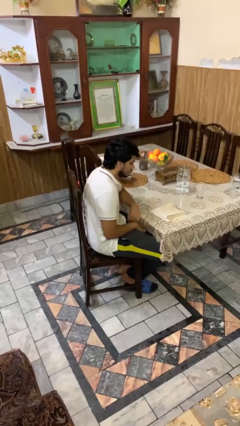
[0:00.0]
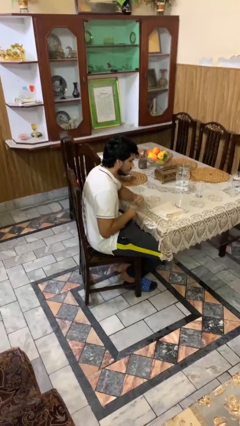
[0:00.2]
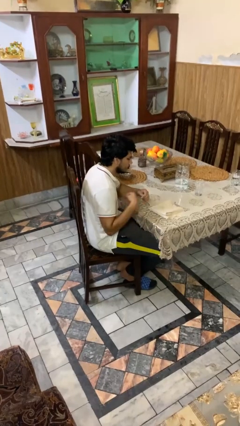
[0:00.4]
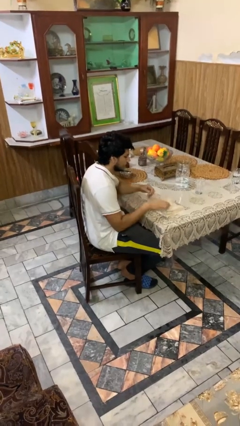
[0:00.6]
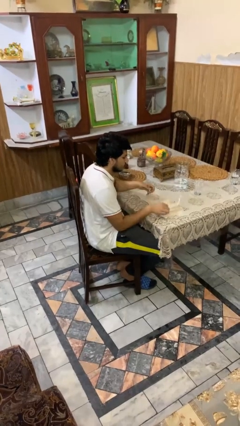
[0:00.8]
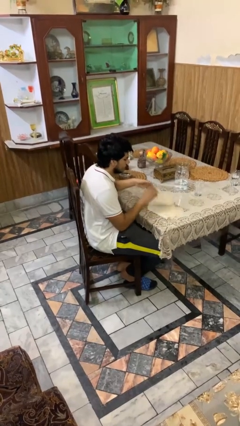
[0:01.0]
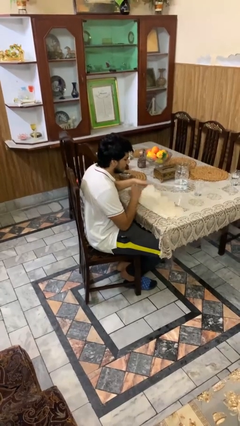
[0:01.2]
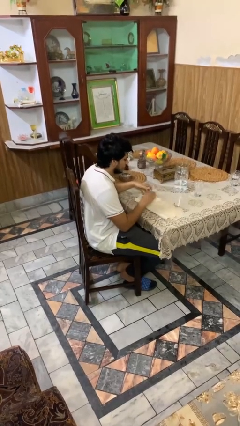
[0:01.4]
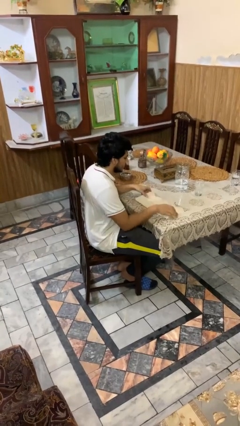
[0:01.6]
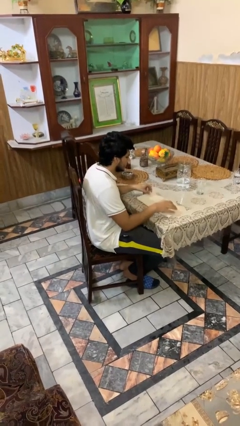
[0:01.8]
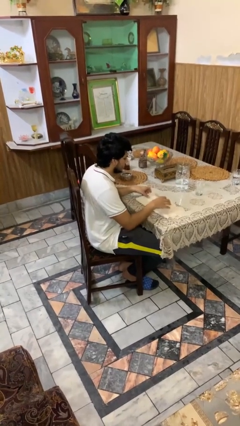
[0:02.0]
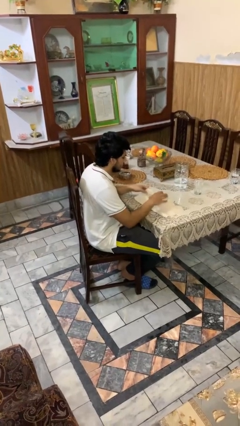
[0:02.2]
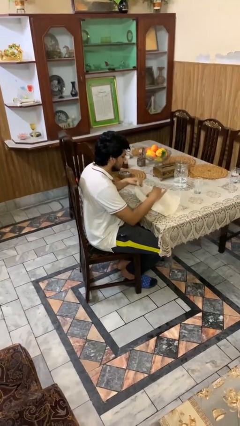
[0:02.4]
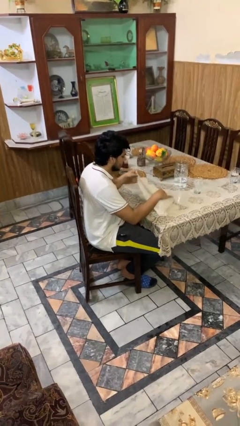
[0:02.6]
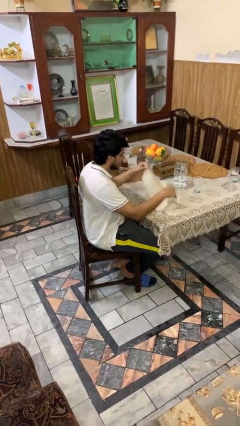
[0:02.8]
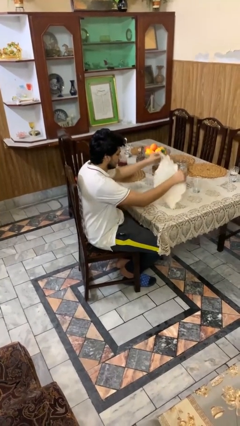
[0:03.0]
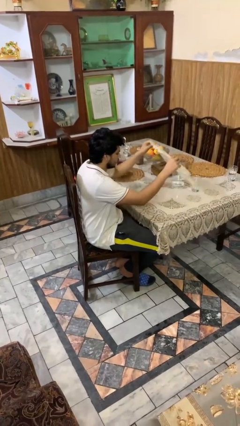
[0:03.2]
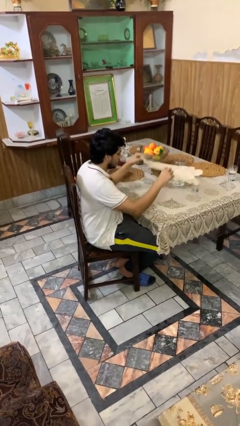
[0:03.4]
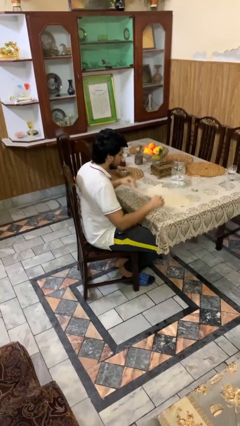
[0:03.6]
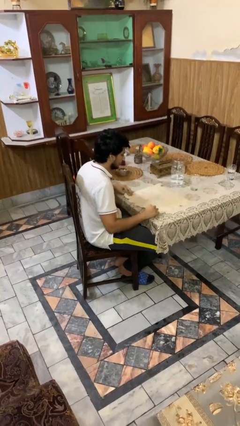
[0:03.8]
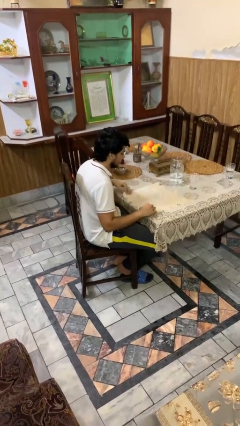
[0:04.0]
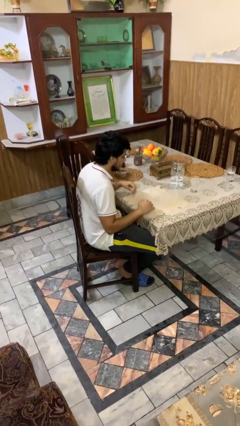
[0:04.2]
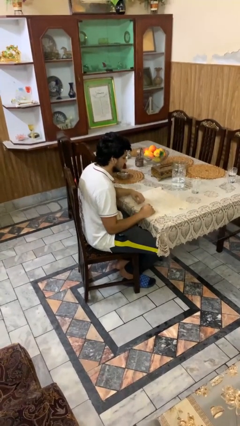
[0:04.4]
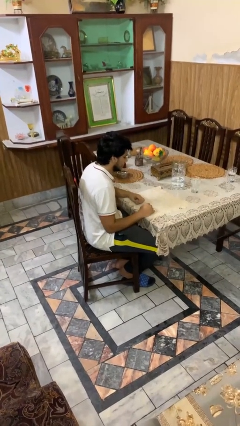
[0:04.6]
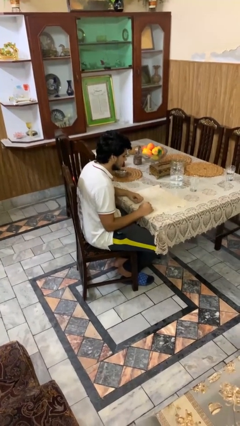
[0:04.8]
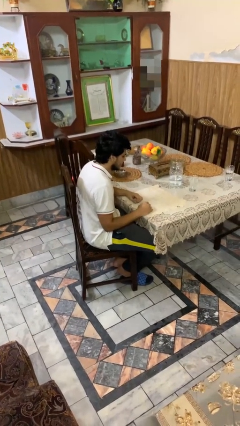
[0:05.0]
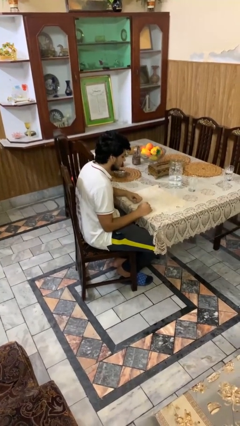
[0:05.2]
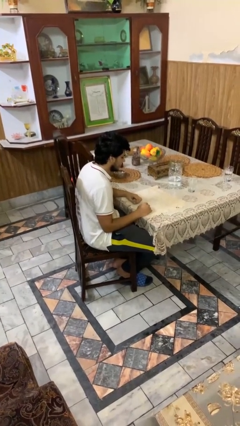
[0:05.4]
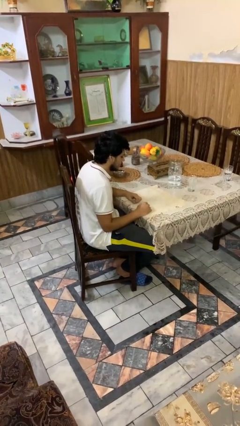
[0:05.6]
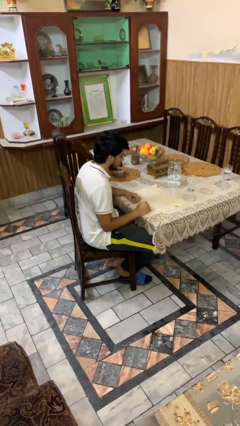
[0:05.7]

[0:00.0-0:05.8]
person spreads tablecloth

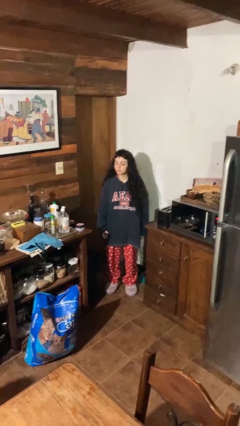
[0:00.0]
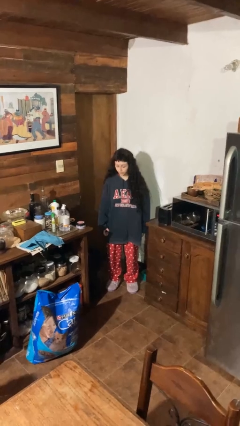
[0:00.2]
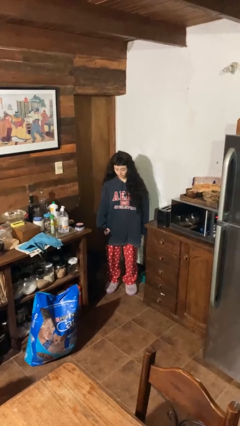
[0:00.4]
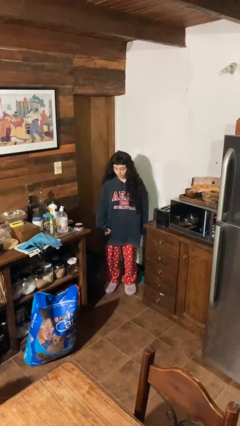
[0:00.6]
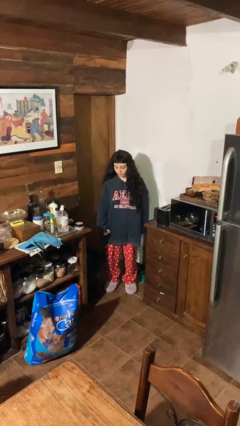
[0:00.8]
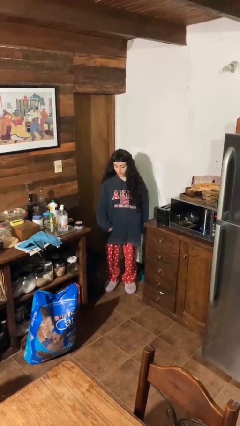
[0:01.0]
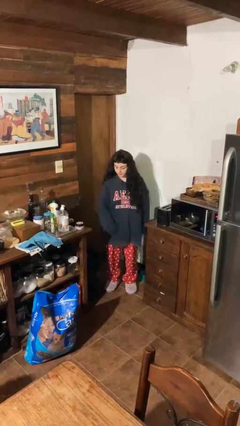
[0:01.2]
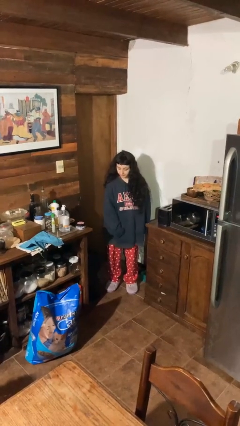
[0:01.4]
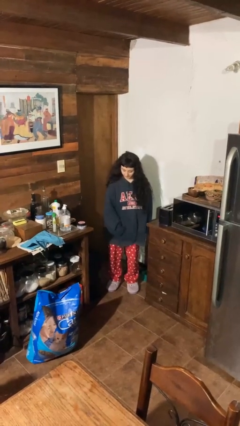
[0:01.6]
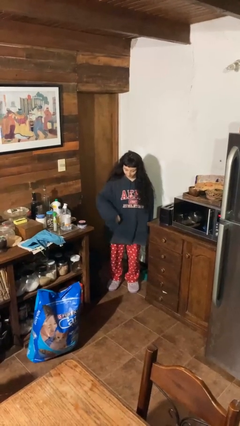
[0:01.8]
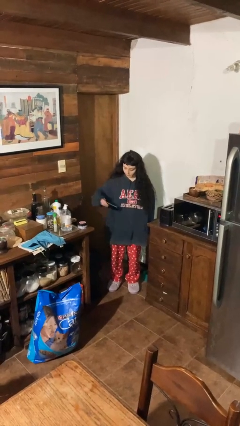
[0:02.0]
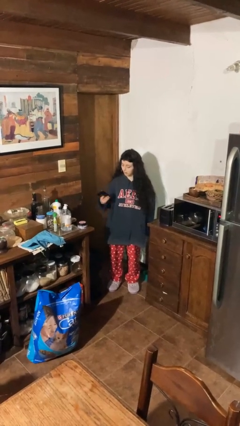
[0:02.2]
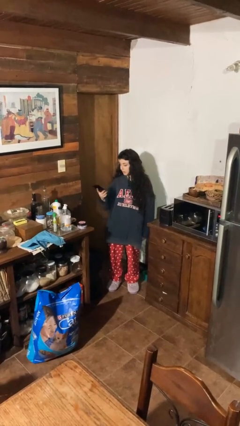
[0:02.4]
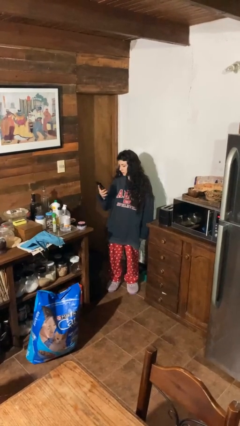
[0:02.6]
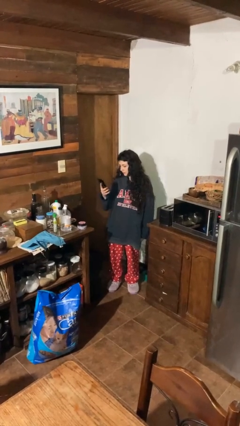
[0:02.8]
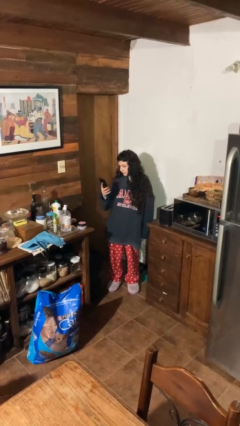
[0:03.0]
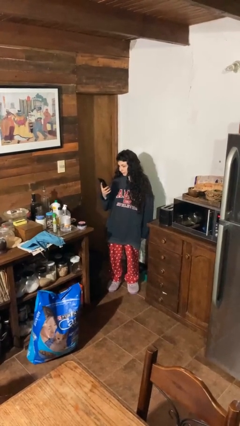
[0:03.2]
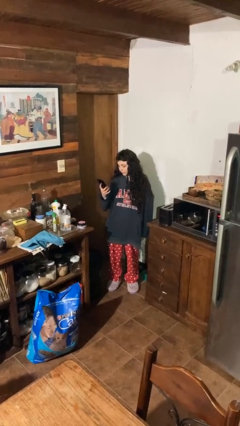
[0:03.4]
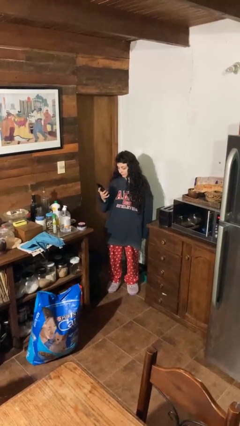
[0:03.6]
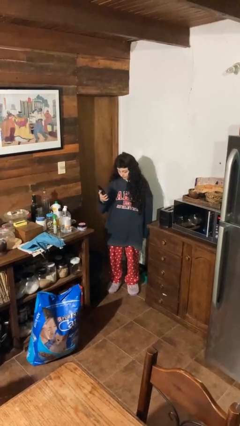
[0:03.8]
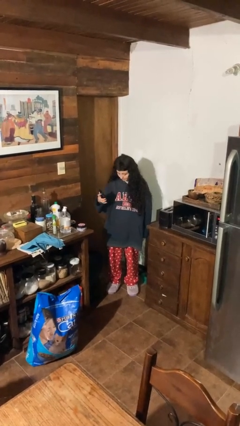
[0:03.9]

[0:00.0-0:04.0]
person takes phone from pocket

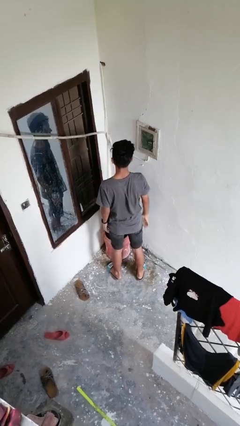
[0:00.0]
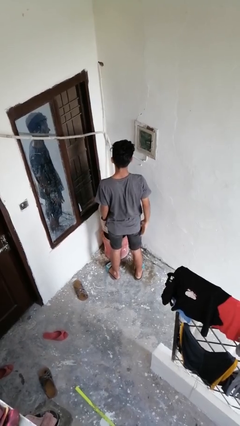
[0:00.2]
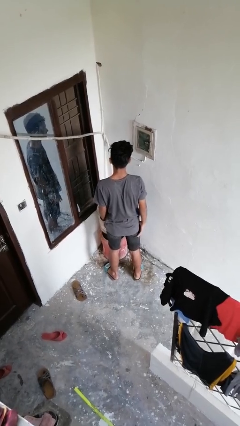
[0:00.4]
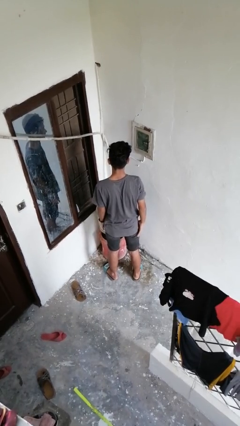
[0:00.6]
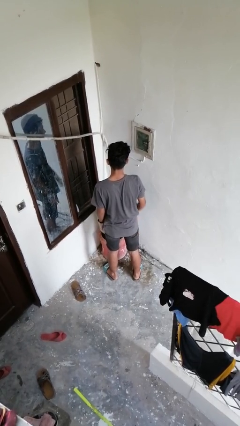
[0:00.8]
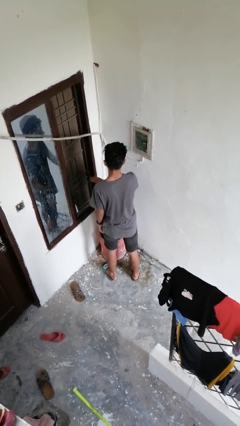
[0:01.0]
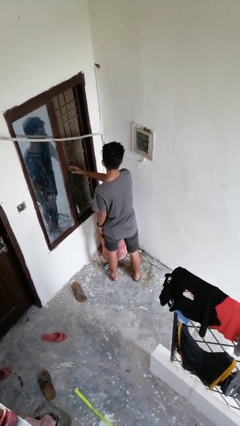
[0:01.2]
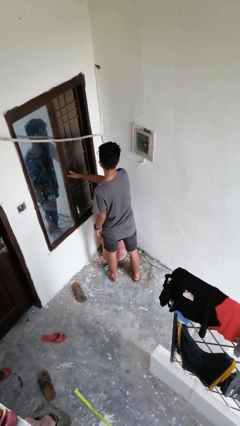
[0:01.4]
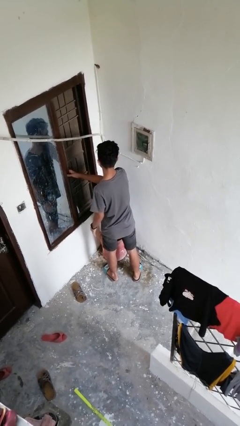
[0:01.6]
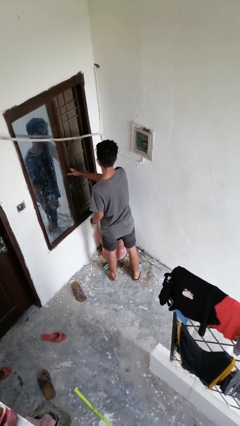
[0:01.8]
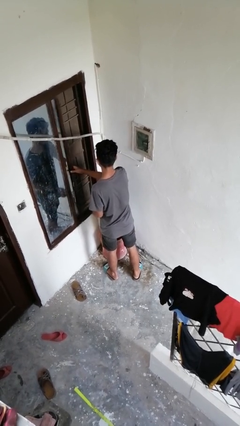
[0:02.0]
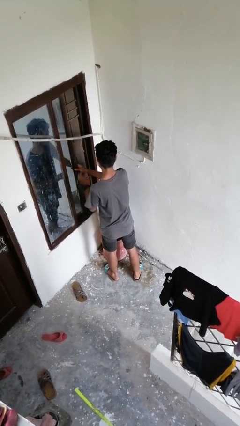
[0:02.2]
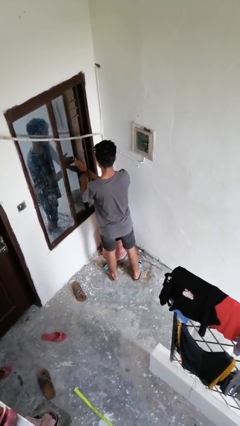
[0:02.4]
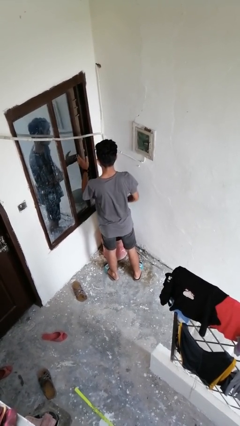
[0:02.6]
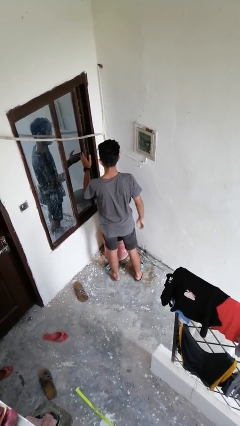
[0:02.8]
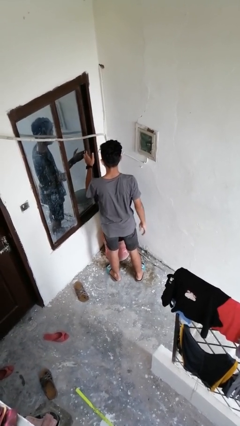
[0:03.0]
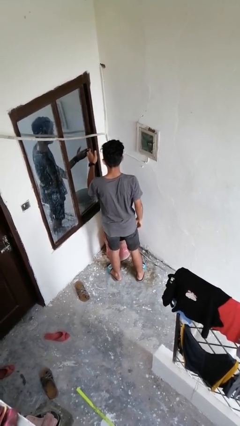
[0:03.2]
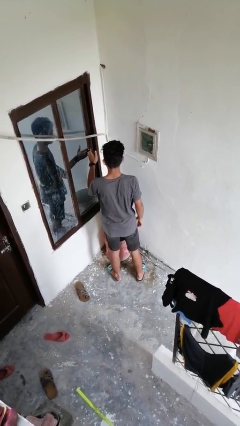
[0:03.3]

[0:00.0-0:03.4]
person closes home window

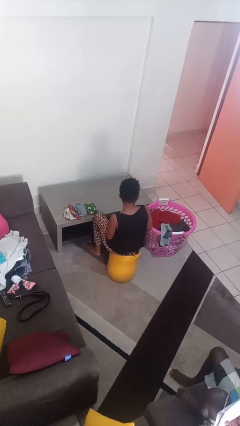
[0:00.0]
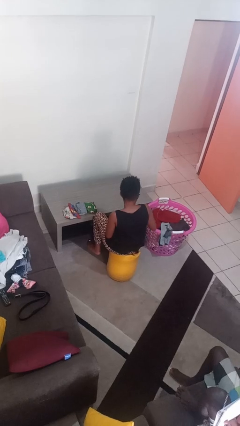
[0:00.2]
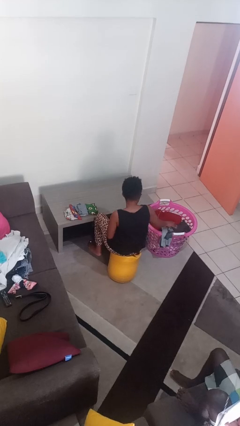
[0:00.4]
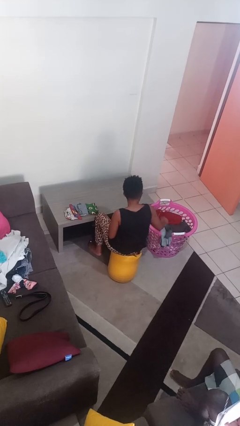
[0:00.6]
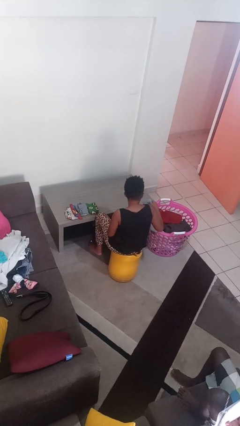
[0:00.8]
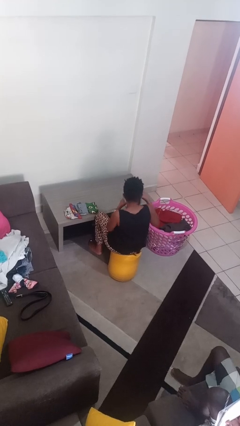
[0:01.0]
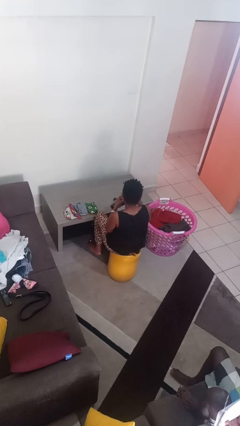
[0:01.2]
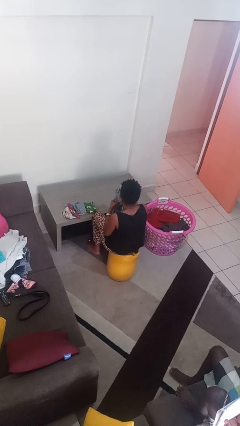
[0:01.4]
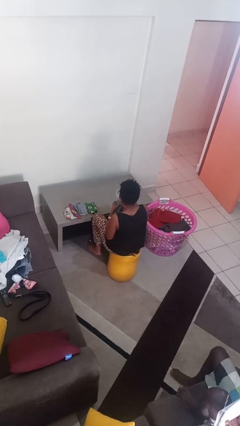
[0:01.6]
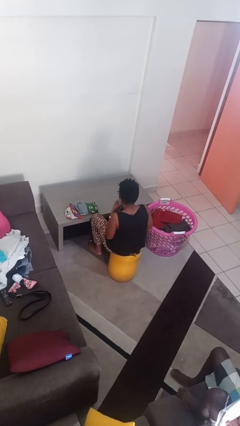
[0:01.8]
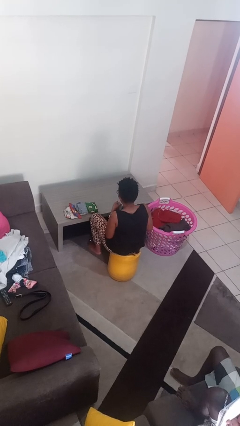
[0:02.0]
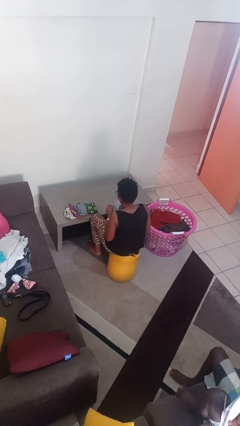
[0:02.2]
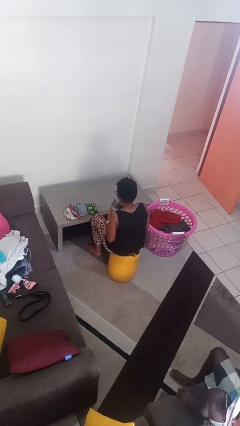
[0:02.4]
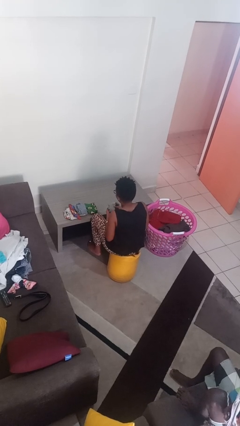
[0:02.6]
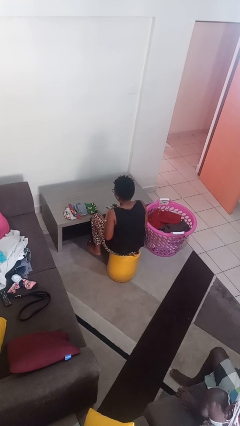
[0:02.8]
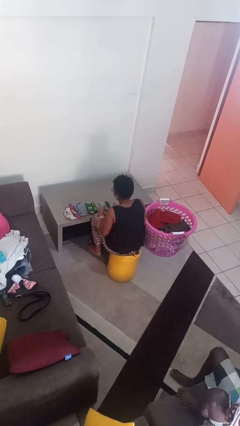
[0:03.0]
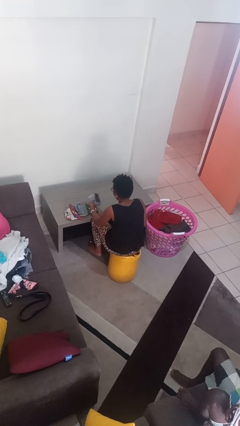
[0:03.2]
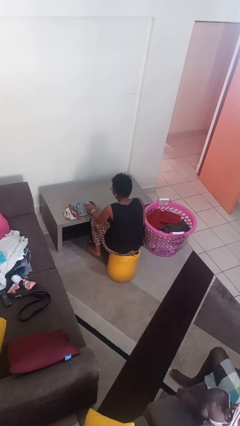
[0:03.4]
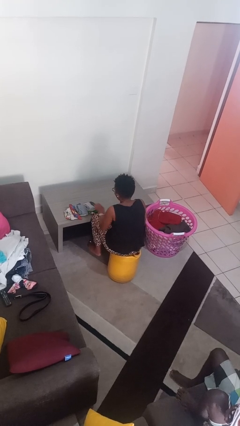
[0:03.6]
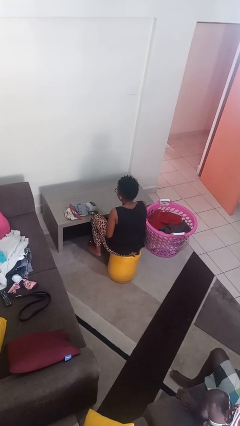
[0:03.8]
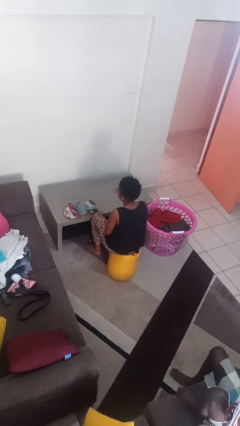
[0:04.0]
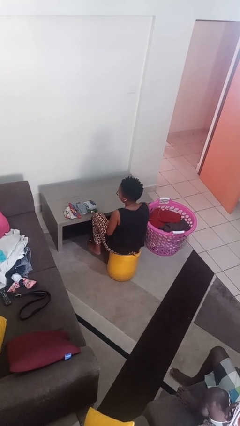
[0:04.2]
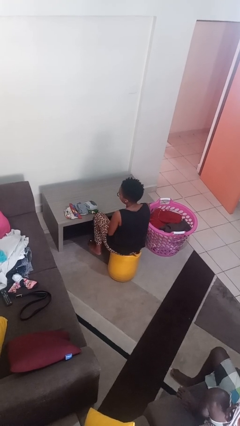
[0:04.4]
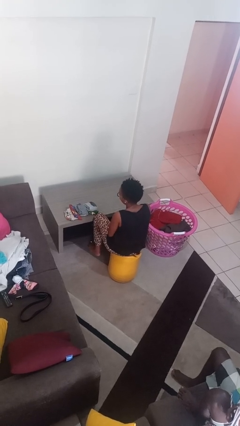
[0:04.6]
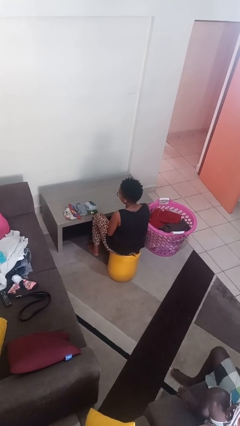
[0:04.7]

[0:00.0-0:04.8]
person folds socks
